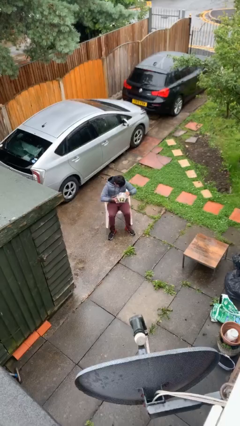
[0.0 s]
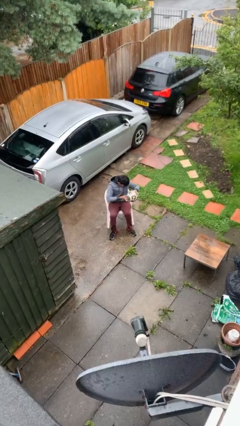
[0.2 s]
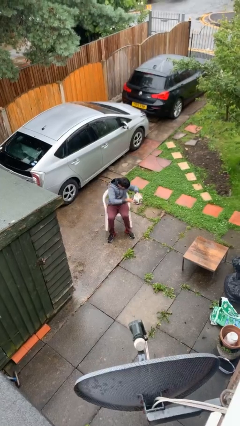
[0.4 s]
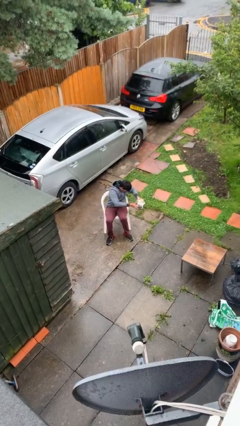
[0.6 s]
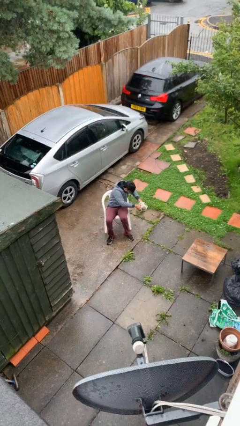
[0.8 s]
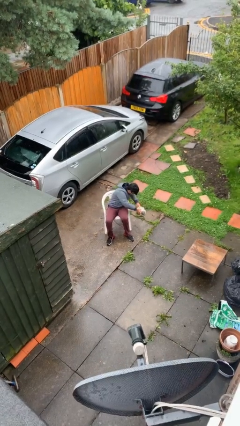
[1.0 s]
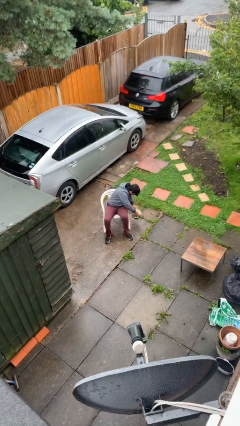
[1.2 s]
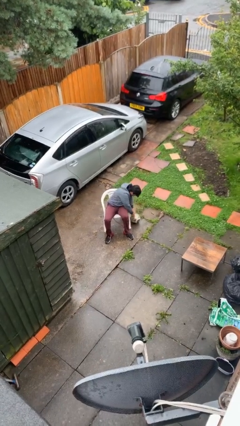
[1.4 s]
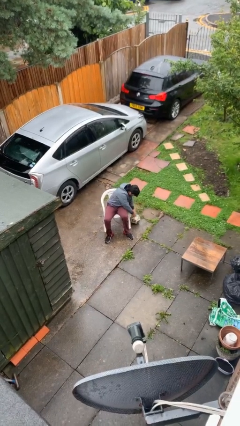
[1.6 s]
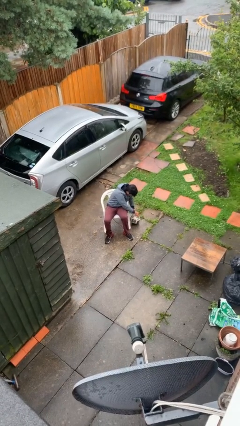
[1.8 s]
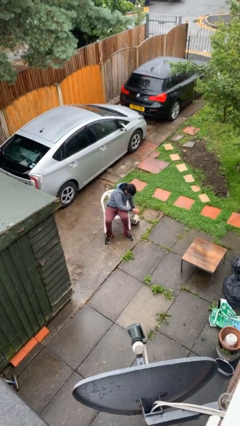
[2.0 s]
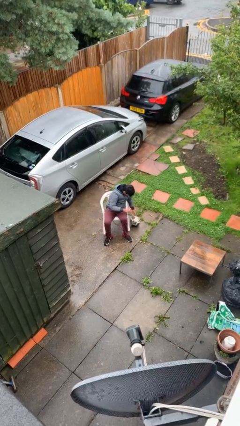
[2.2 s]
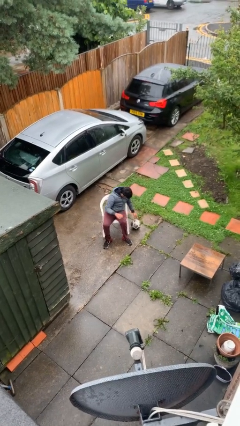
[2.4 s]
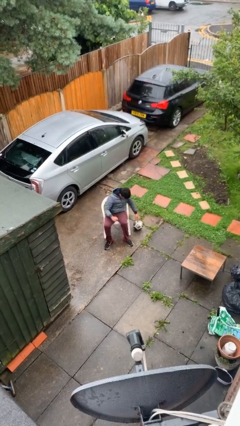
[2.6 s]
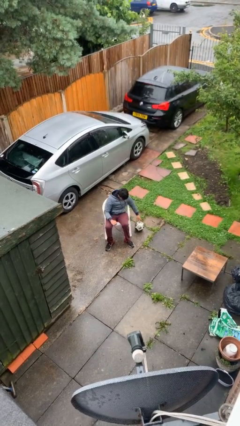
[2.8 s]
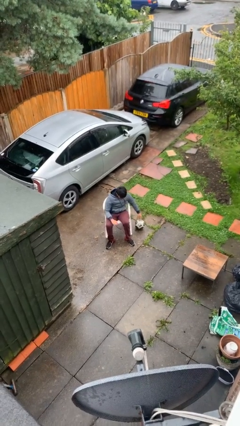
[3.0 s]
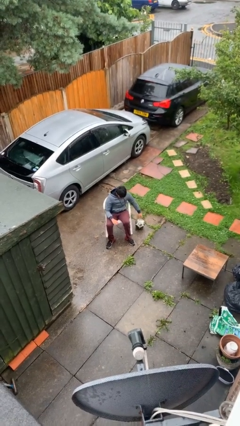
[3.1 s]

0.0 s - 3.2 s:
person puts down object on floor

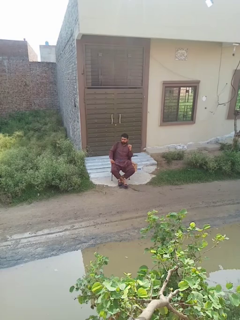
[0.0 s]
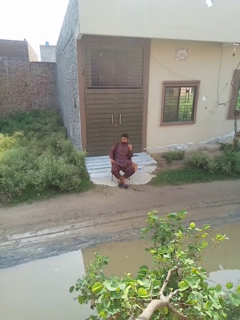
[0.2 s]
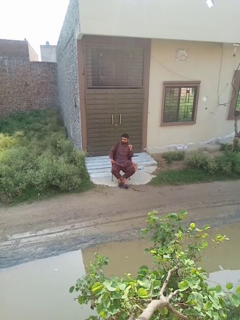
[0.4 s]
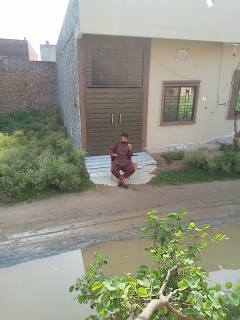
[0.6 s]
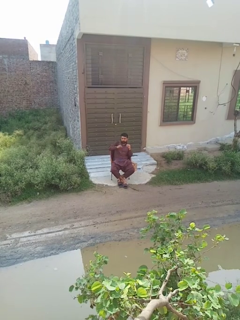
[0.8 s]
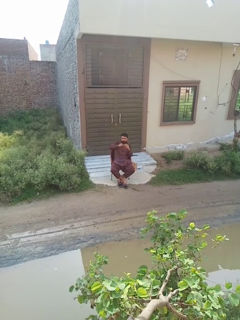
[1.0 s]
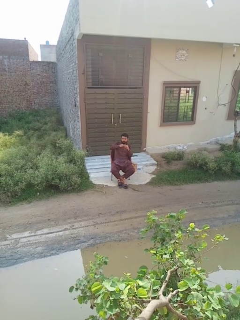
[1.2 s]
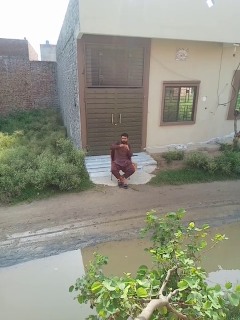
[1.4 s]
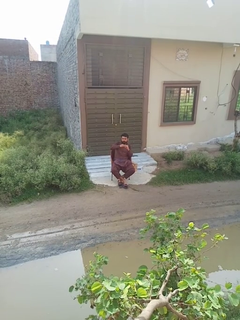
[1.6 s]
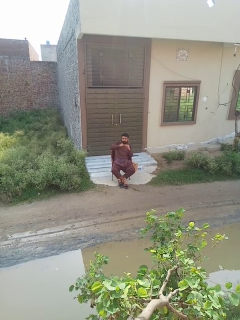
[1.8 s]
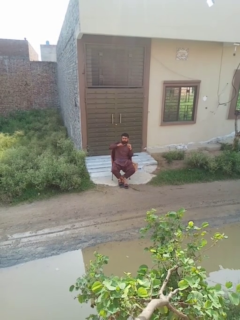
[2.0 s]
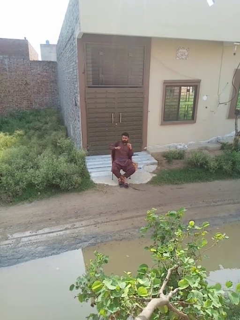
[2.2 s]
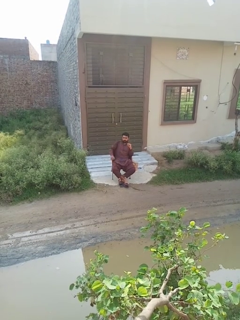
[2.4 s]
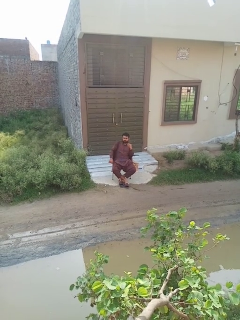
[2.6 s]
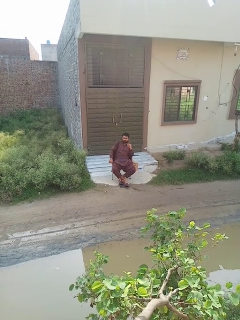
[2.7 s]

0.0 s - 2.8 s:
person takes off ring

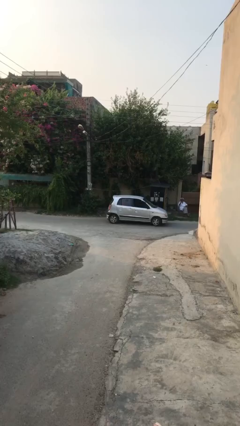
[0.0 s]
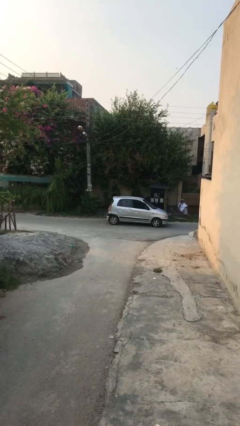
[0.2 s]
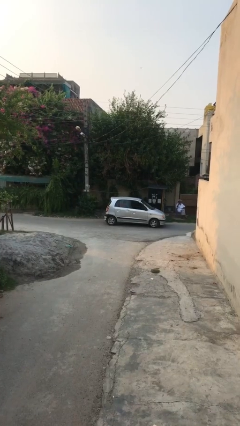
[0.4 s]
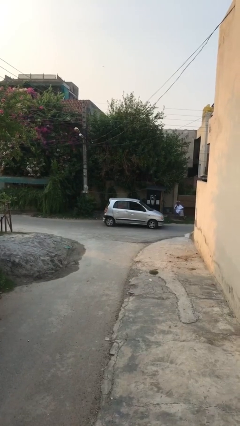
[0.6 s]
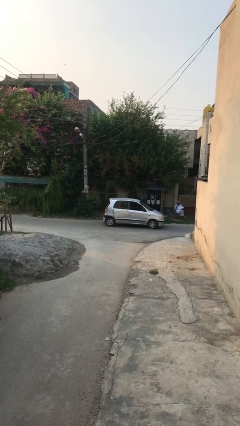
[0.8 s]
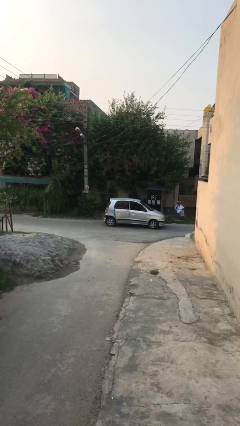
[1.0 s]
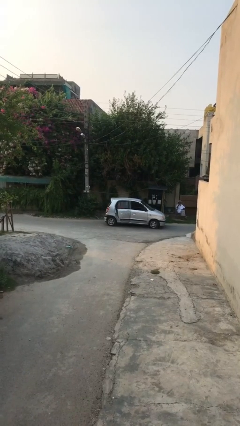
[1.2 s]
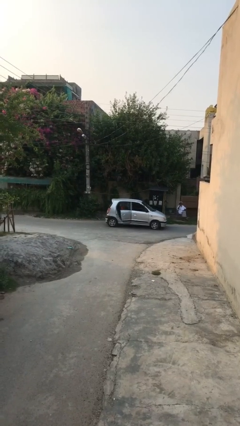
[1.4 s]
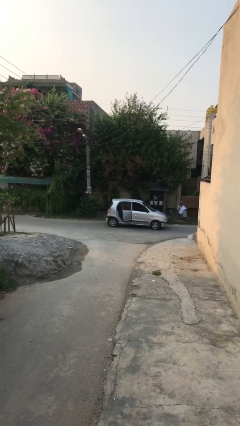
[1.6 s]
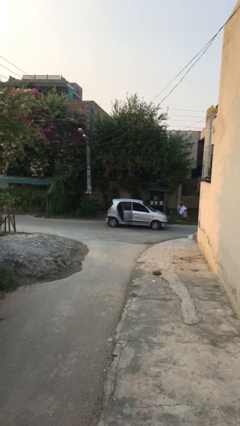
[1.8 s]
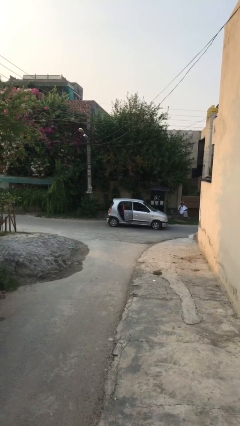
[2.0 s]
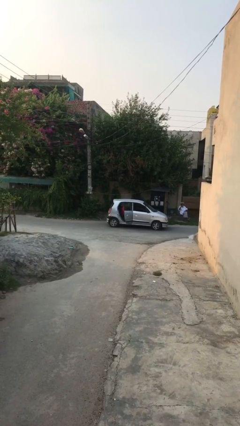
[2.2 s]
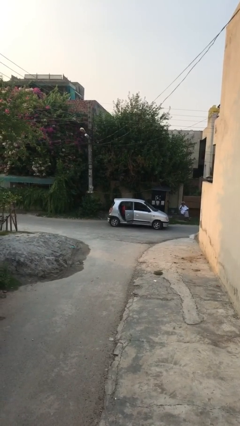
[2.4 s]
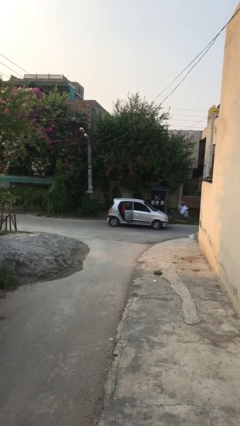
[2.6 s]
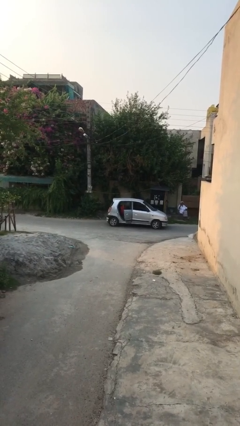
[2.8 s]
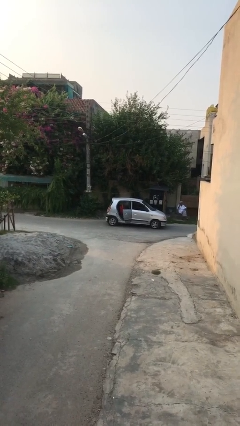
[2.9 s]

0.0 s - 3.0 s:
person opens car door

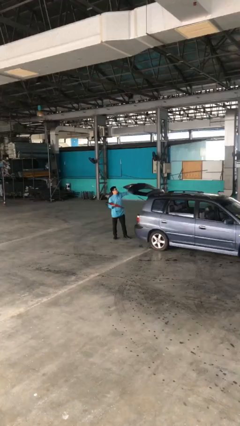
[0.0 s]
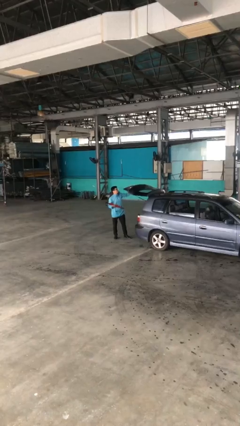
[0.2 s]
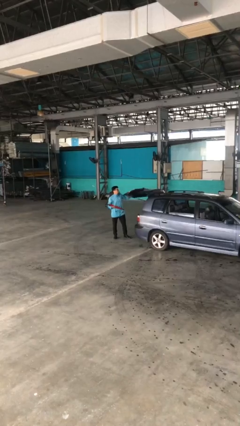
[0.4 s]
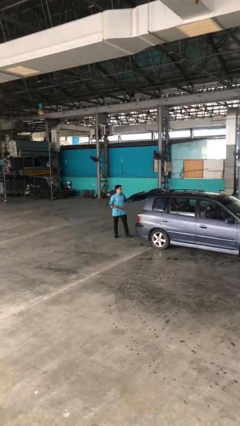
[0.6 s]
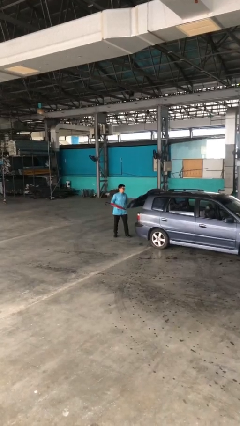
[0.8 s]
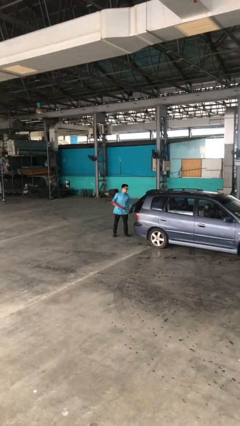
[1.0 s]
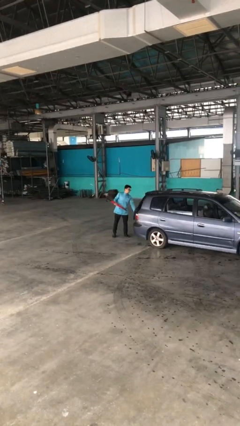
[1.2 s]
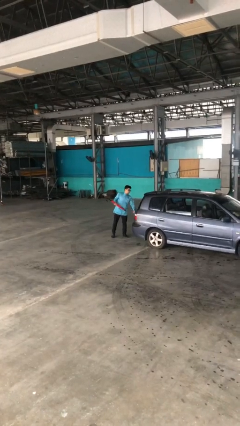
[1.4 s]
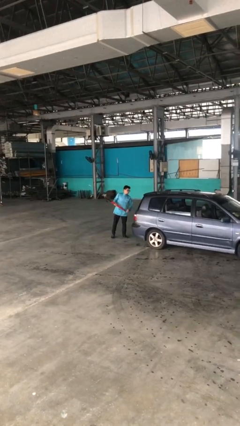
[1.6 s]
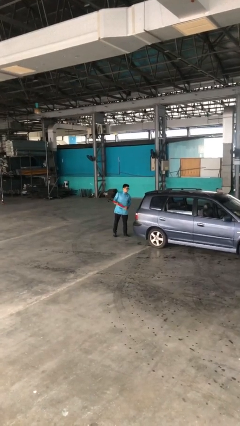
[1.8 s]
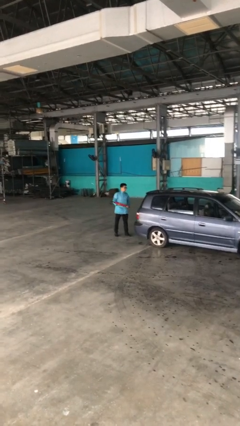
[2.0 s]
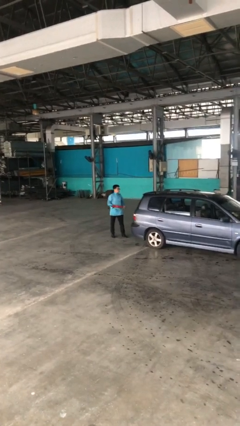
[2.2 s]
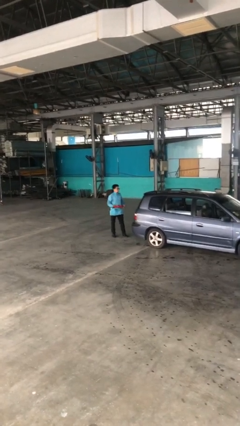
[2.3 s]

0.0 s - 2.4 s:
person closes car trunk

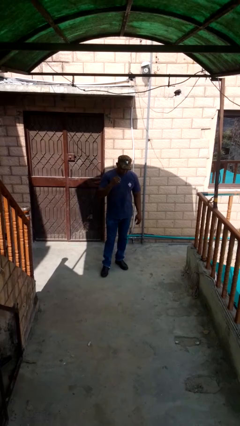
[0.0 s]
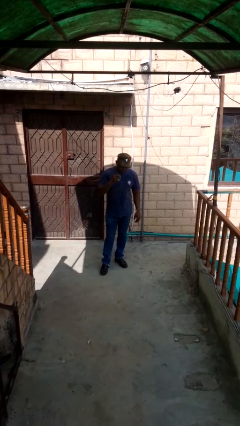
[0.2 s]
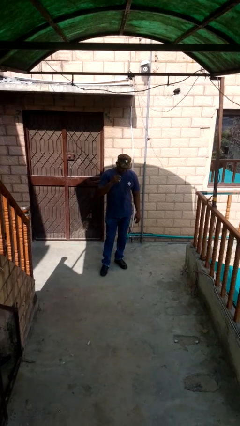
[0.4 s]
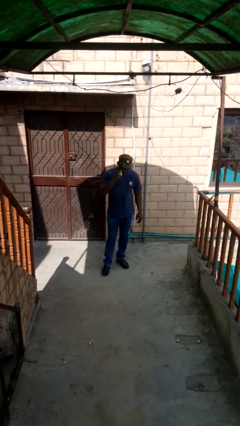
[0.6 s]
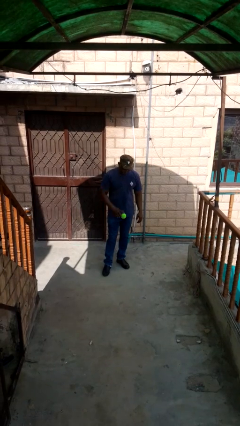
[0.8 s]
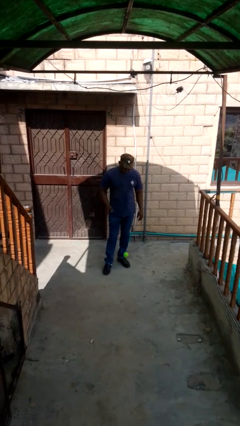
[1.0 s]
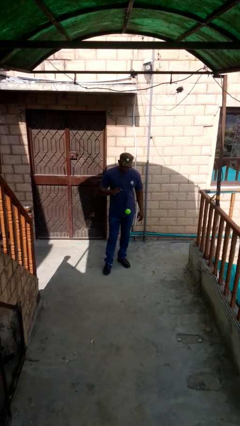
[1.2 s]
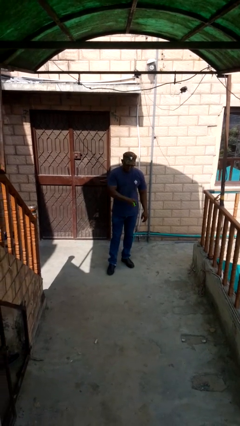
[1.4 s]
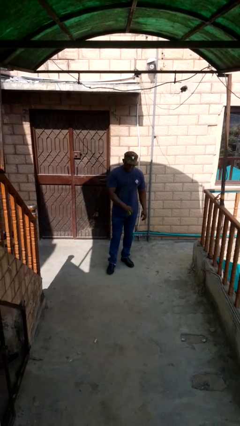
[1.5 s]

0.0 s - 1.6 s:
person bounces ball on floor

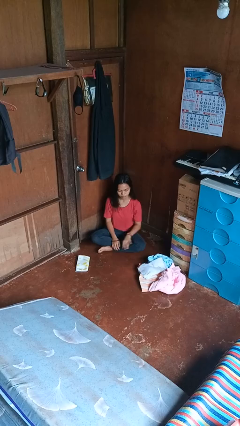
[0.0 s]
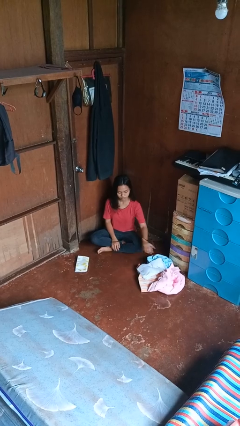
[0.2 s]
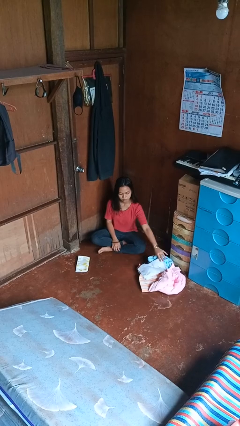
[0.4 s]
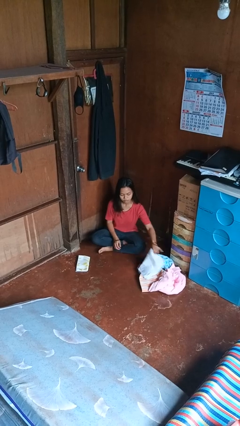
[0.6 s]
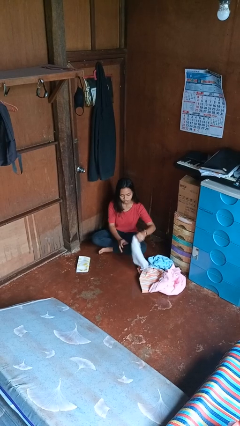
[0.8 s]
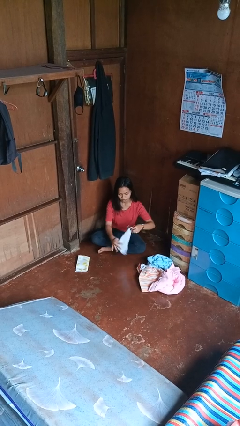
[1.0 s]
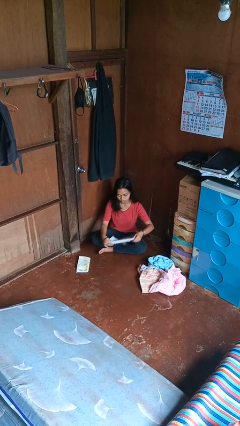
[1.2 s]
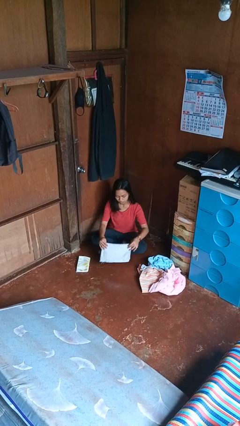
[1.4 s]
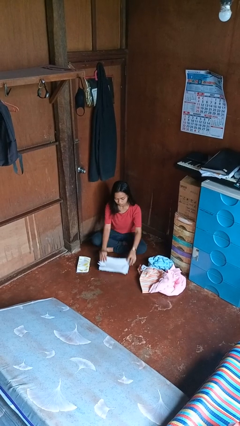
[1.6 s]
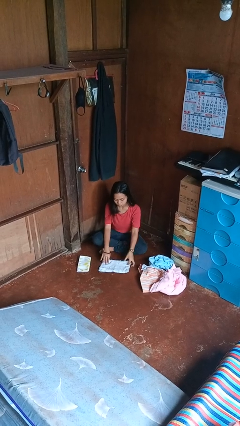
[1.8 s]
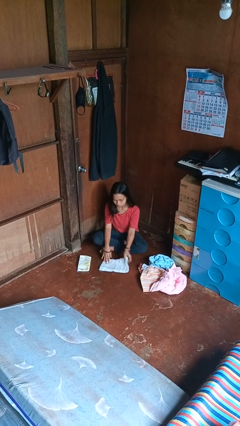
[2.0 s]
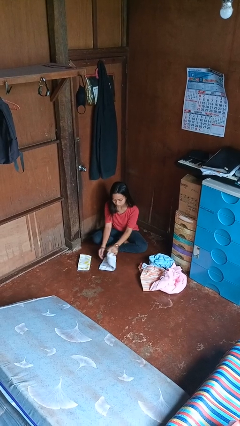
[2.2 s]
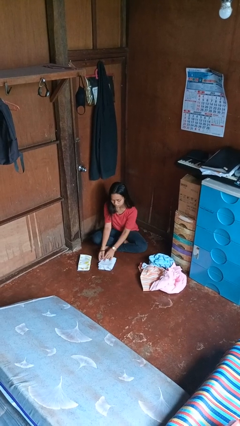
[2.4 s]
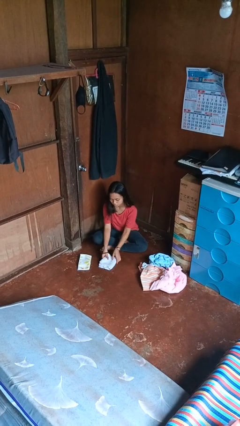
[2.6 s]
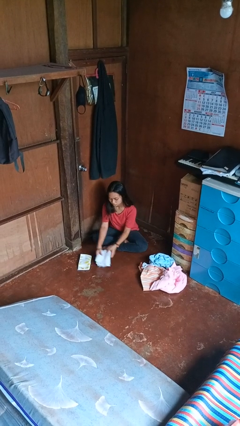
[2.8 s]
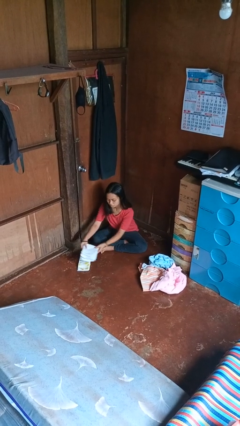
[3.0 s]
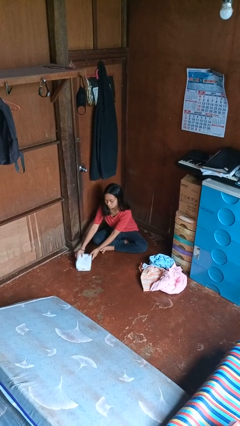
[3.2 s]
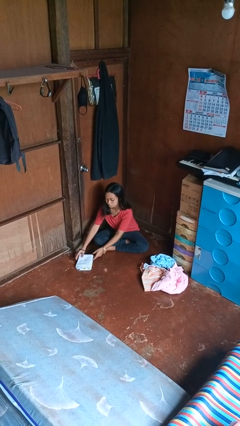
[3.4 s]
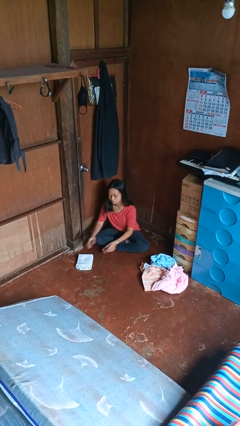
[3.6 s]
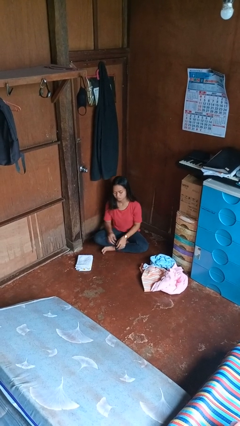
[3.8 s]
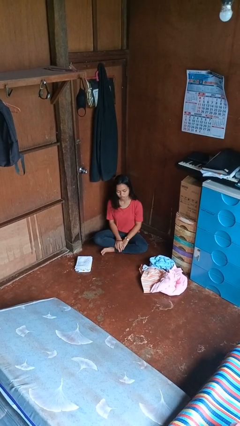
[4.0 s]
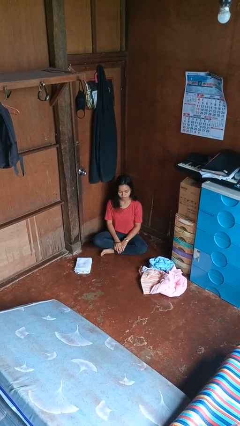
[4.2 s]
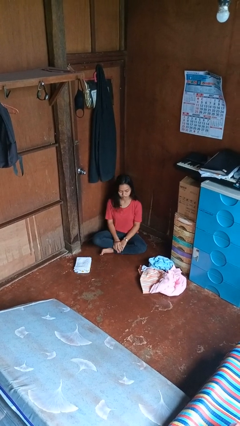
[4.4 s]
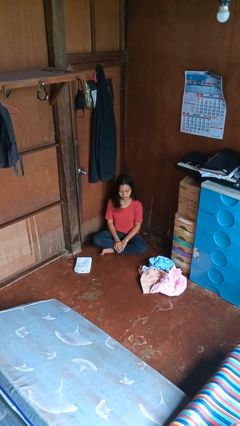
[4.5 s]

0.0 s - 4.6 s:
person folds towel

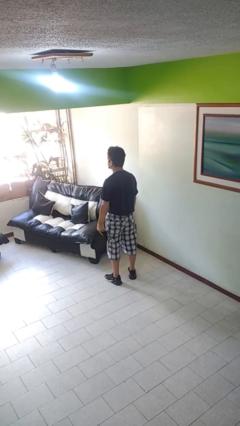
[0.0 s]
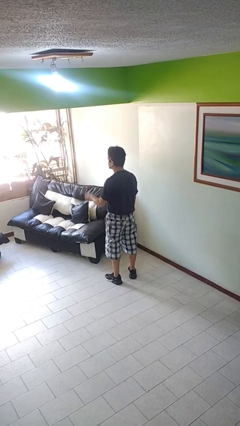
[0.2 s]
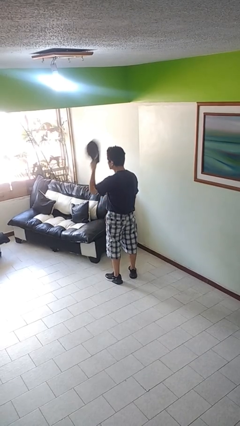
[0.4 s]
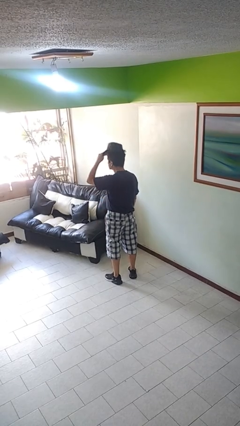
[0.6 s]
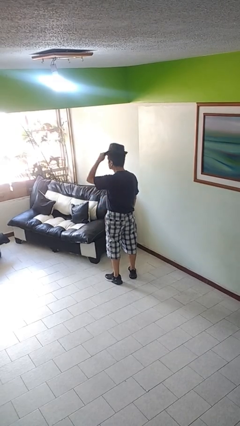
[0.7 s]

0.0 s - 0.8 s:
person puts on hat
